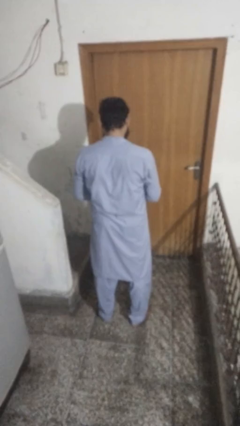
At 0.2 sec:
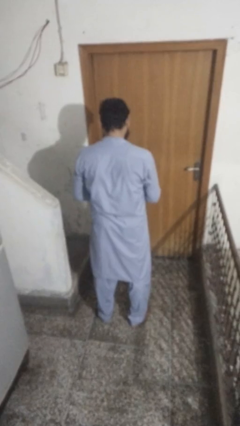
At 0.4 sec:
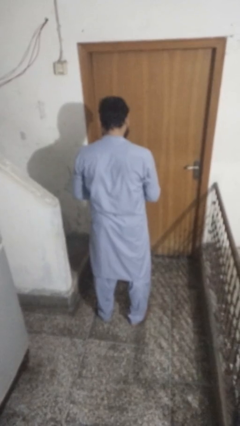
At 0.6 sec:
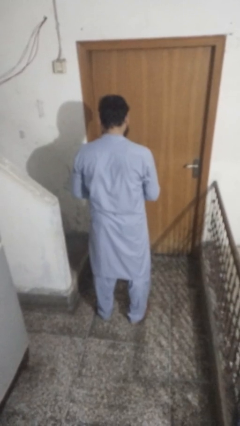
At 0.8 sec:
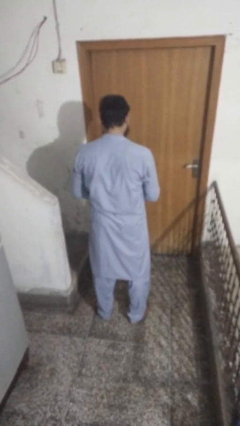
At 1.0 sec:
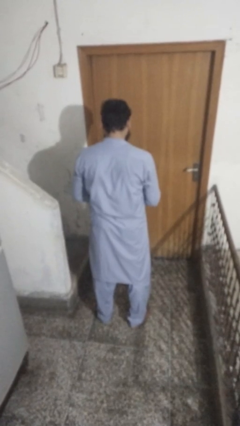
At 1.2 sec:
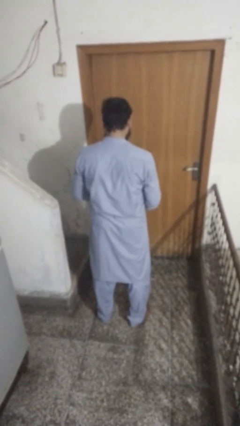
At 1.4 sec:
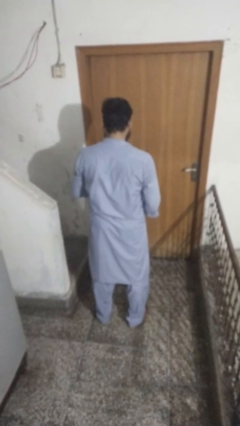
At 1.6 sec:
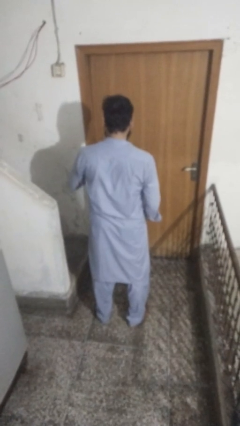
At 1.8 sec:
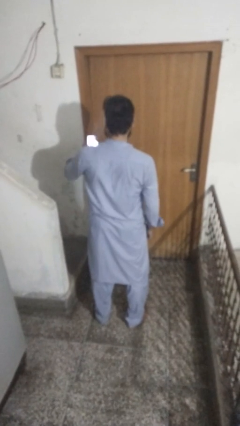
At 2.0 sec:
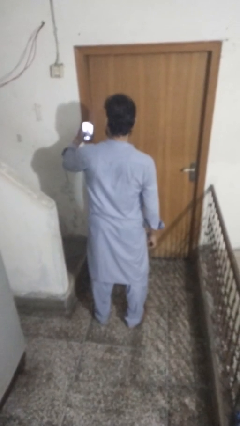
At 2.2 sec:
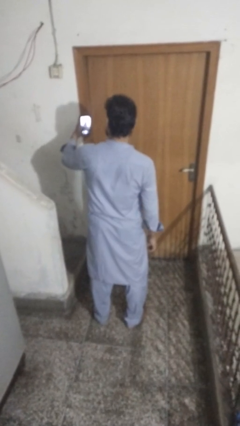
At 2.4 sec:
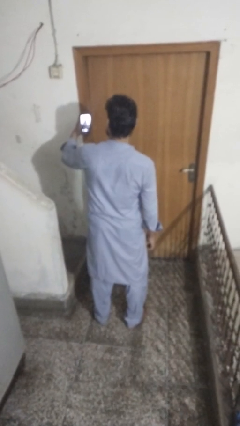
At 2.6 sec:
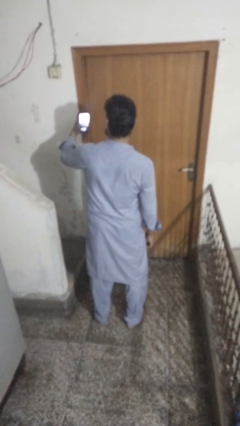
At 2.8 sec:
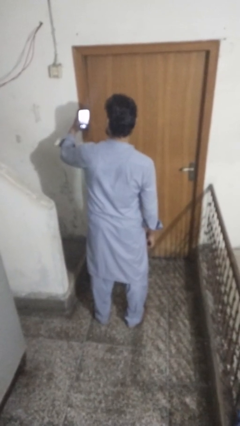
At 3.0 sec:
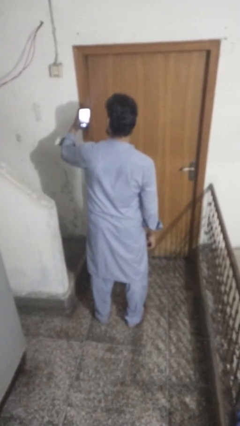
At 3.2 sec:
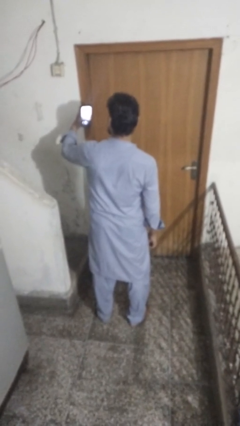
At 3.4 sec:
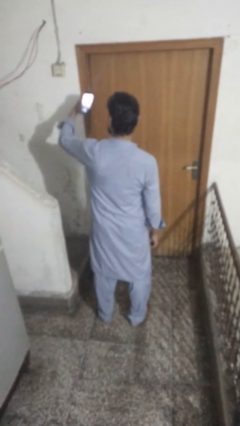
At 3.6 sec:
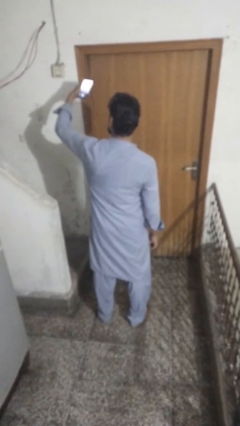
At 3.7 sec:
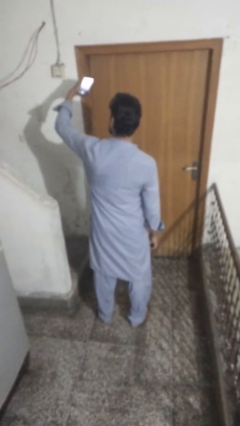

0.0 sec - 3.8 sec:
person takes selfie

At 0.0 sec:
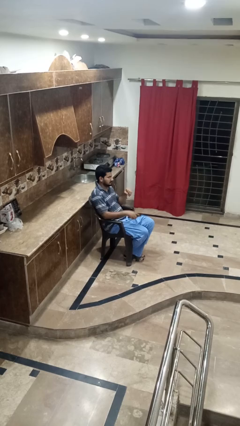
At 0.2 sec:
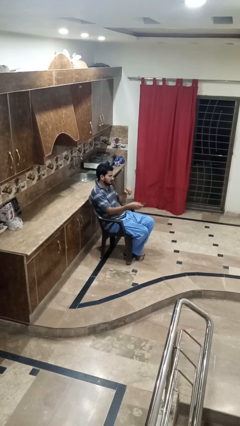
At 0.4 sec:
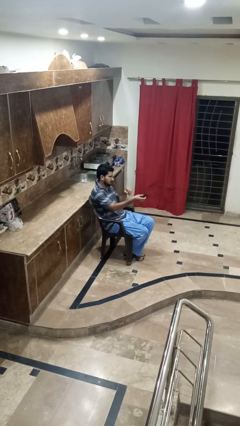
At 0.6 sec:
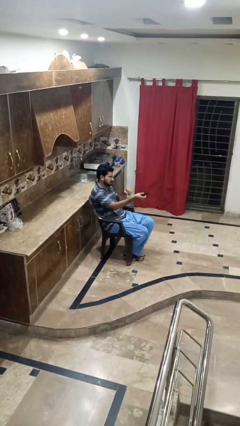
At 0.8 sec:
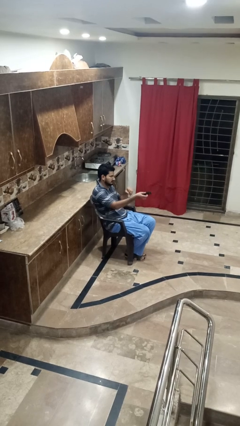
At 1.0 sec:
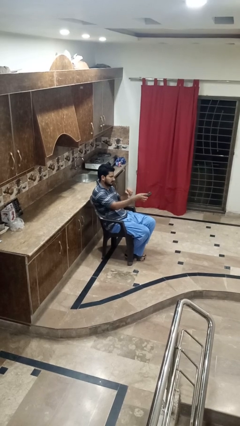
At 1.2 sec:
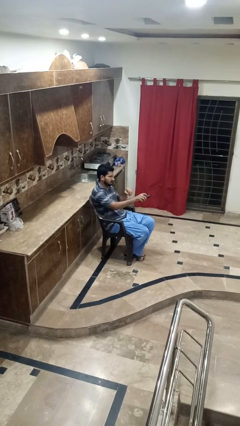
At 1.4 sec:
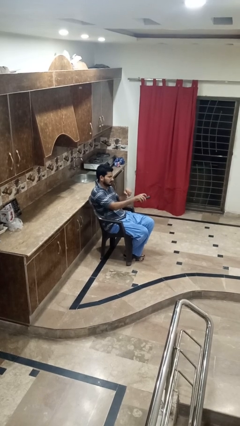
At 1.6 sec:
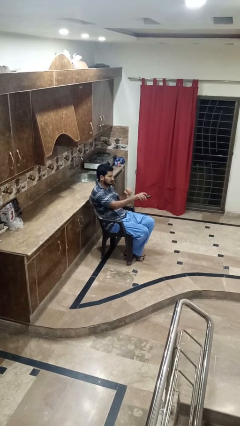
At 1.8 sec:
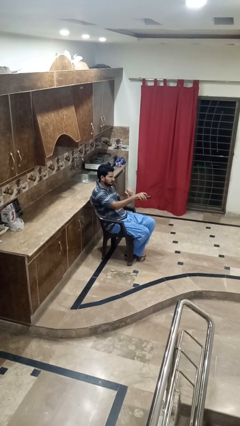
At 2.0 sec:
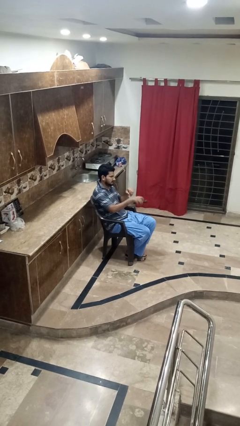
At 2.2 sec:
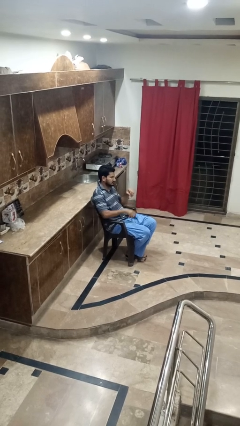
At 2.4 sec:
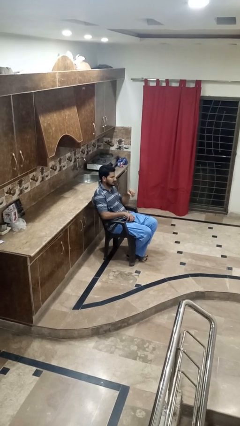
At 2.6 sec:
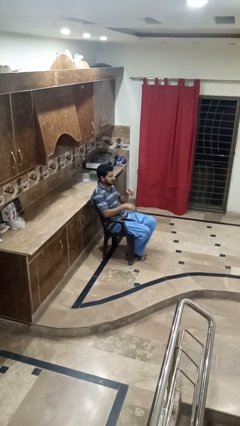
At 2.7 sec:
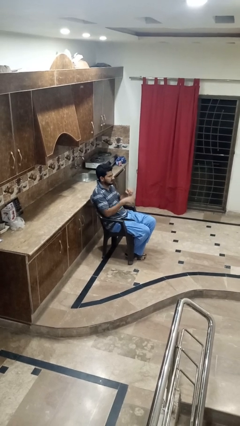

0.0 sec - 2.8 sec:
person uses television remote

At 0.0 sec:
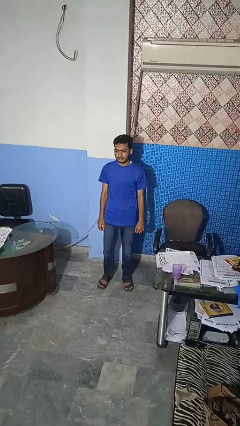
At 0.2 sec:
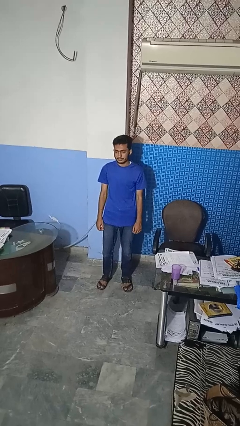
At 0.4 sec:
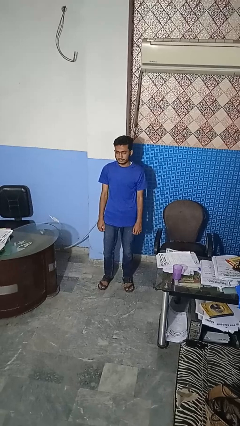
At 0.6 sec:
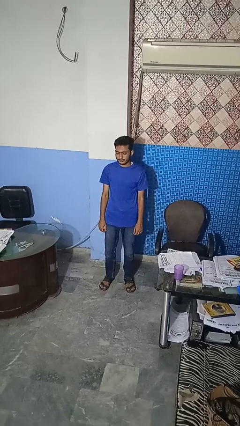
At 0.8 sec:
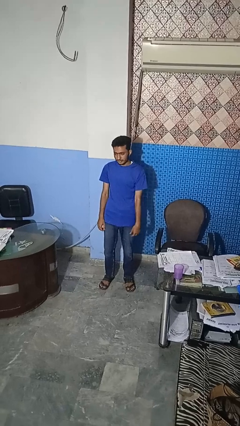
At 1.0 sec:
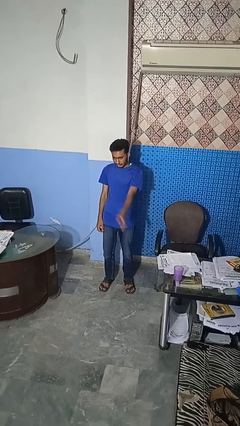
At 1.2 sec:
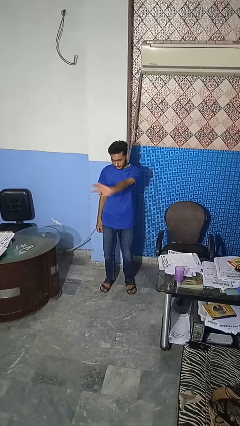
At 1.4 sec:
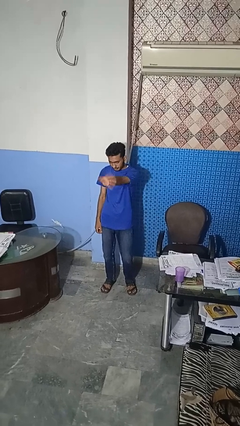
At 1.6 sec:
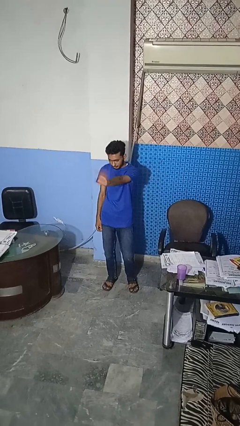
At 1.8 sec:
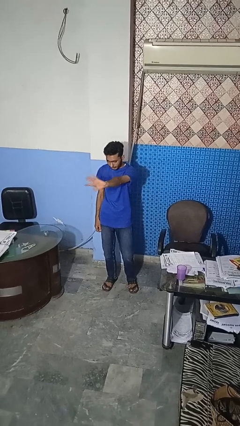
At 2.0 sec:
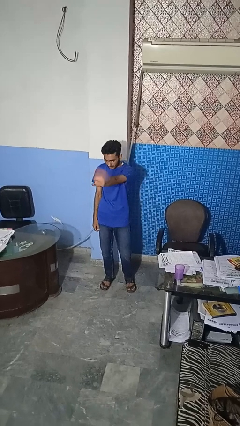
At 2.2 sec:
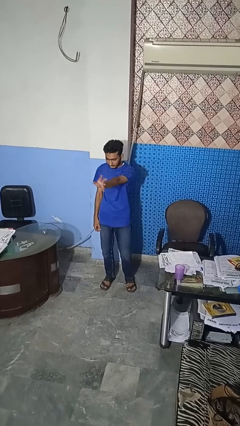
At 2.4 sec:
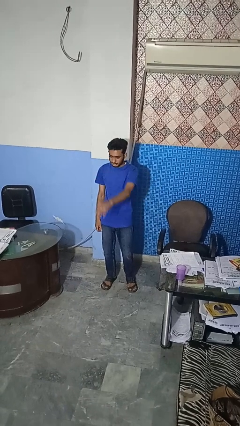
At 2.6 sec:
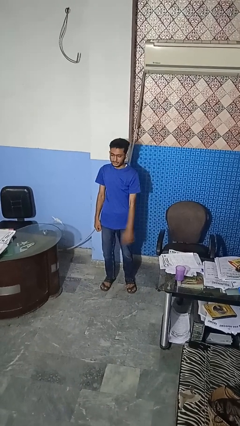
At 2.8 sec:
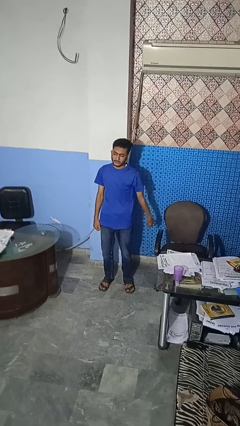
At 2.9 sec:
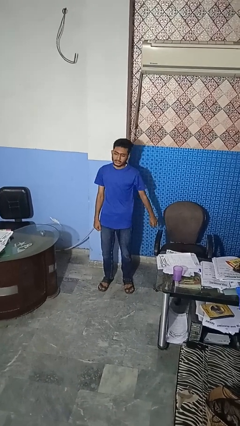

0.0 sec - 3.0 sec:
person waves at person

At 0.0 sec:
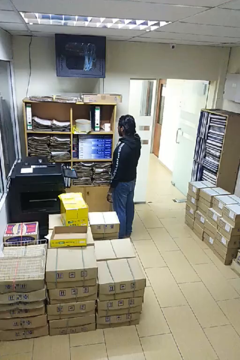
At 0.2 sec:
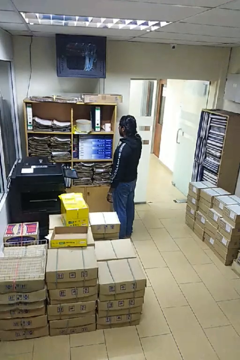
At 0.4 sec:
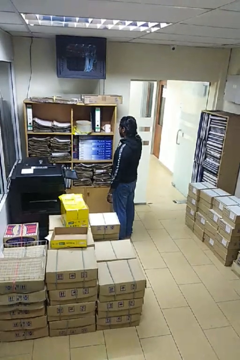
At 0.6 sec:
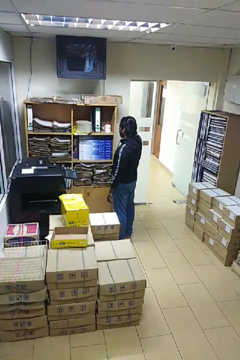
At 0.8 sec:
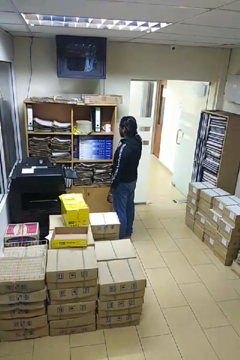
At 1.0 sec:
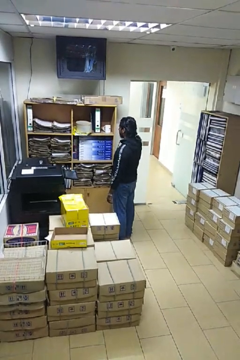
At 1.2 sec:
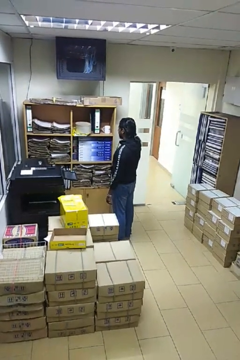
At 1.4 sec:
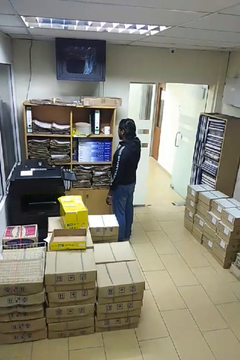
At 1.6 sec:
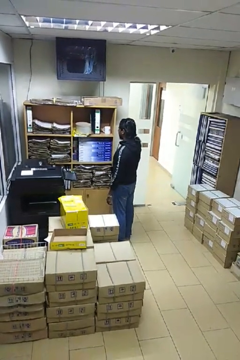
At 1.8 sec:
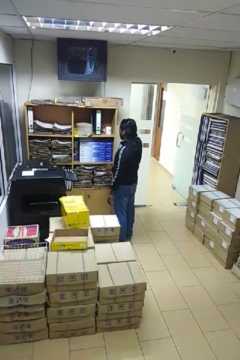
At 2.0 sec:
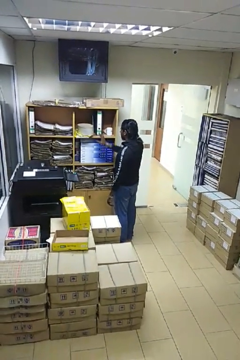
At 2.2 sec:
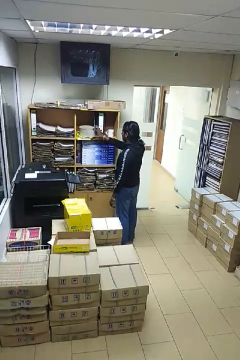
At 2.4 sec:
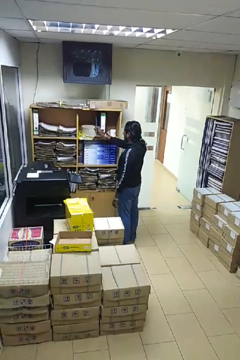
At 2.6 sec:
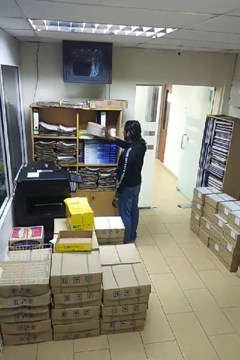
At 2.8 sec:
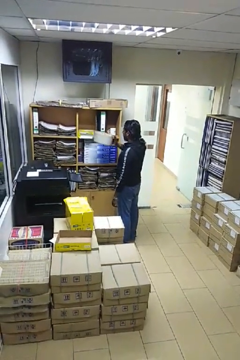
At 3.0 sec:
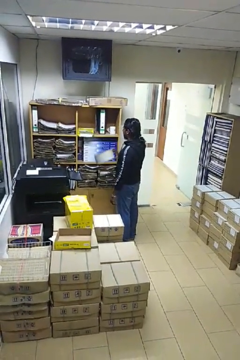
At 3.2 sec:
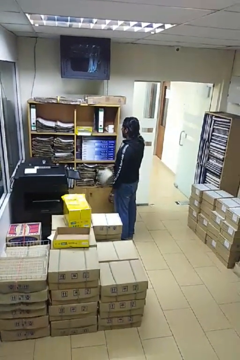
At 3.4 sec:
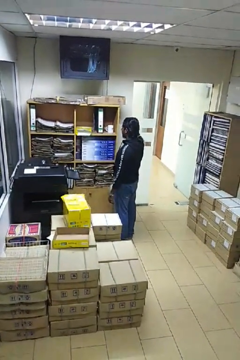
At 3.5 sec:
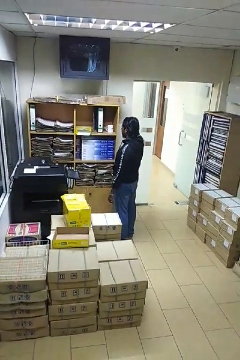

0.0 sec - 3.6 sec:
person picks up object from cabinet

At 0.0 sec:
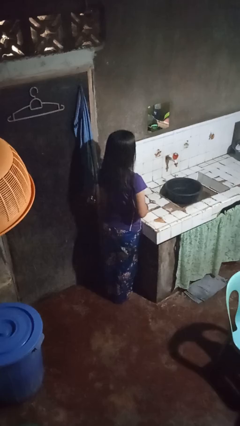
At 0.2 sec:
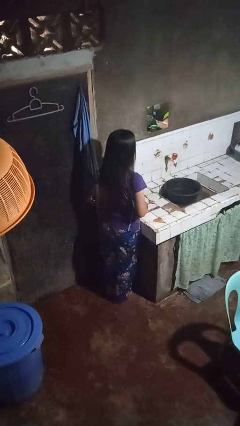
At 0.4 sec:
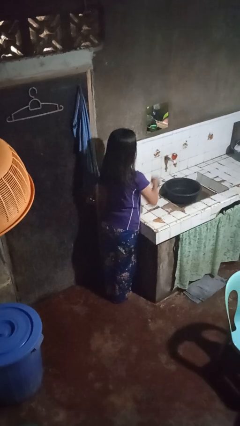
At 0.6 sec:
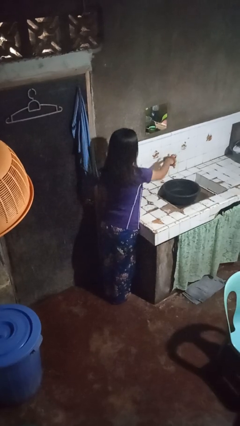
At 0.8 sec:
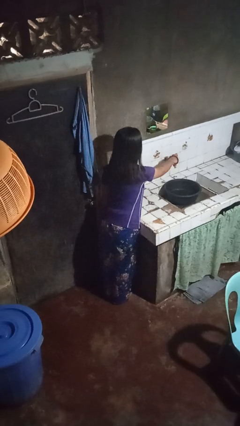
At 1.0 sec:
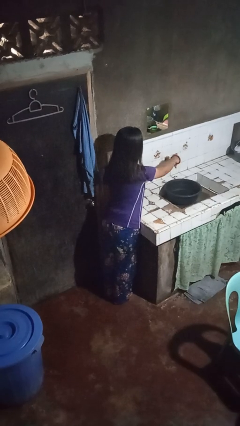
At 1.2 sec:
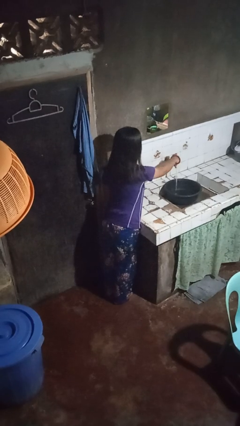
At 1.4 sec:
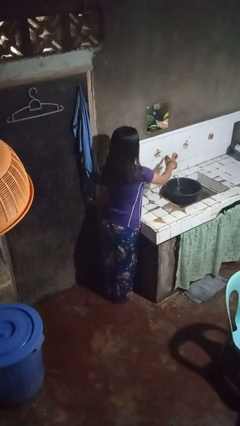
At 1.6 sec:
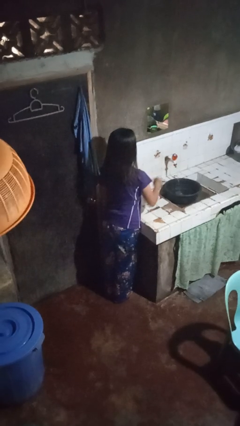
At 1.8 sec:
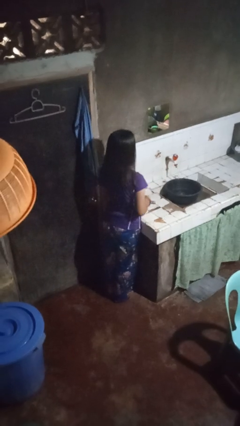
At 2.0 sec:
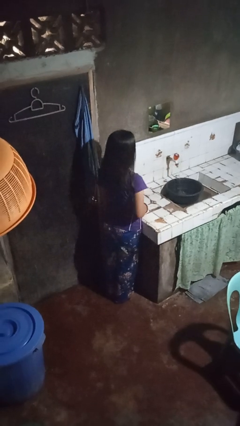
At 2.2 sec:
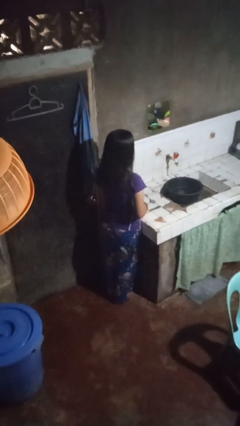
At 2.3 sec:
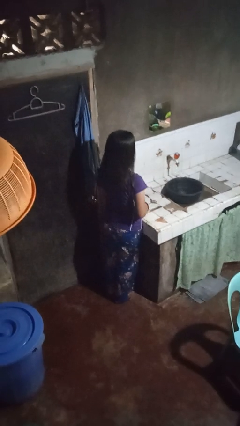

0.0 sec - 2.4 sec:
person turns on faucet

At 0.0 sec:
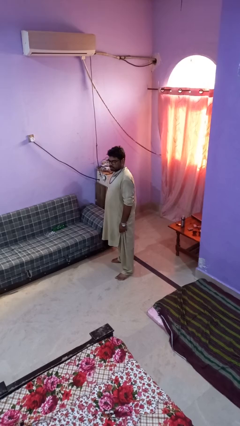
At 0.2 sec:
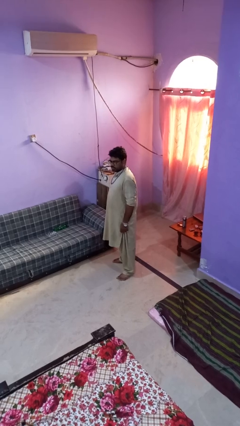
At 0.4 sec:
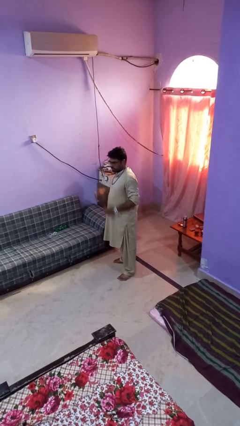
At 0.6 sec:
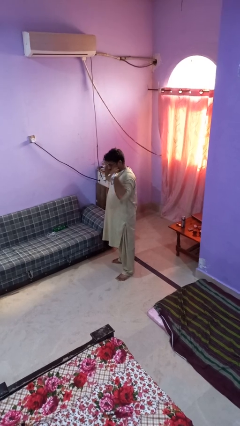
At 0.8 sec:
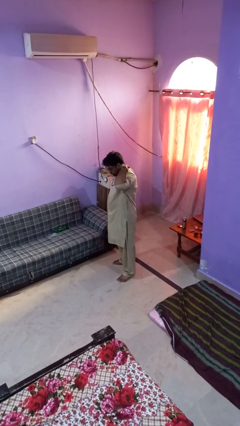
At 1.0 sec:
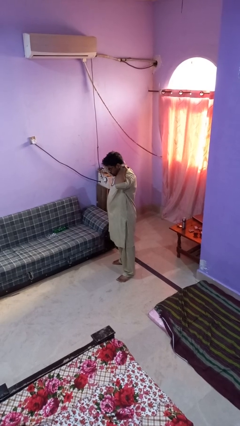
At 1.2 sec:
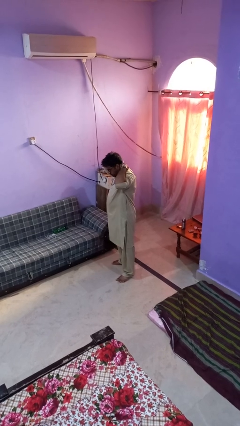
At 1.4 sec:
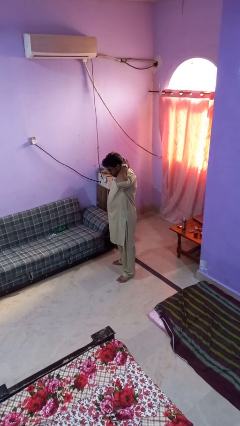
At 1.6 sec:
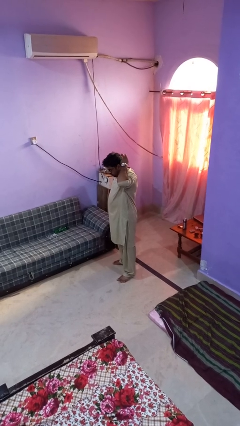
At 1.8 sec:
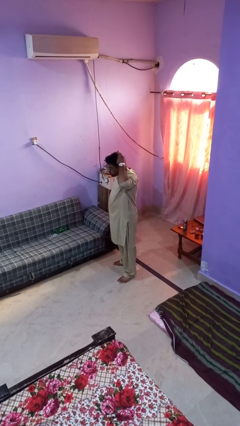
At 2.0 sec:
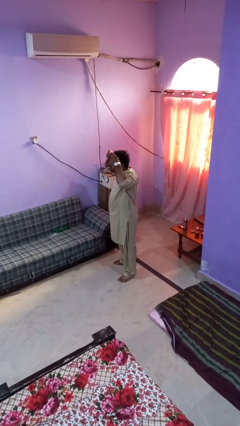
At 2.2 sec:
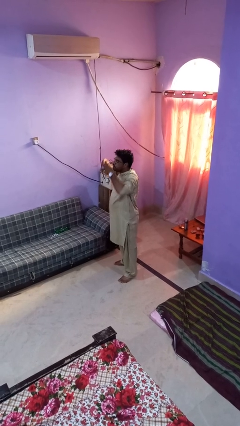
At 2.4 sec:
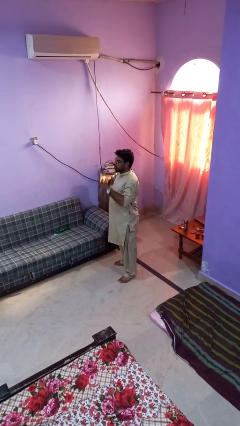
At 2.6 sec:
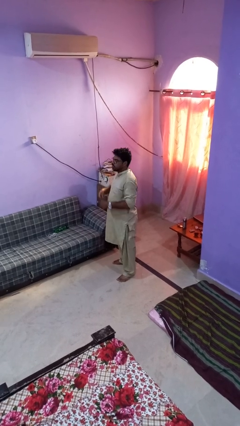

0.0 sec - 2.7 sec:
person takes off necklace
